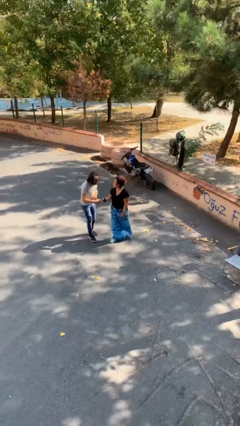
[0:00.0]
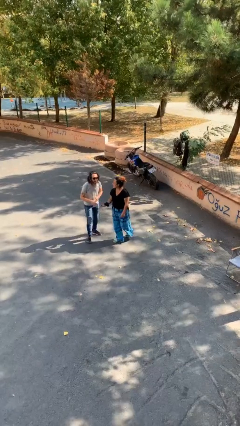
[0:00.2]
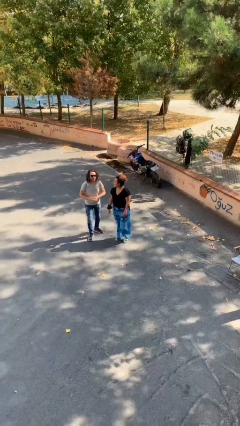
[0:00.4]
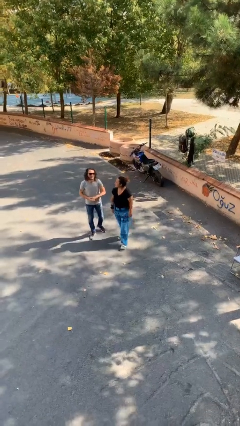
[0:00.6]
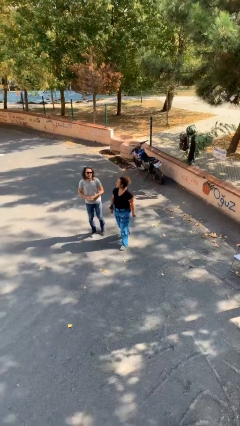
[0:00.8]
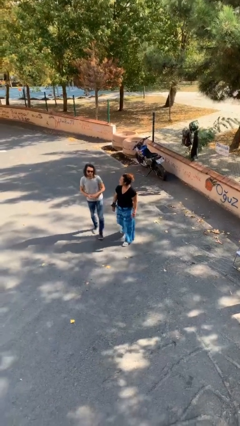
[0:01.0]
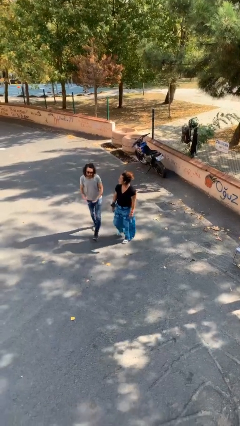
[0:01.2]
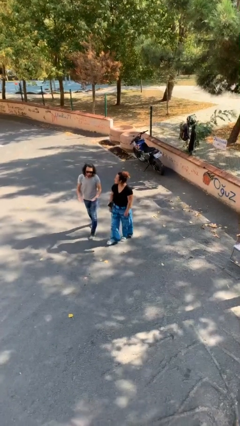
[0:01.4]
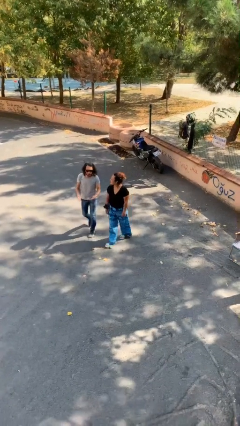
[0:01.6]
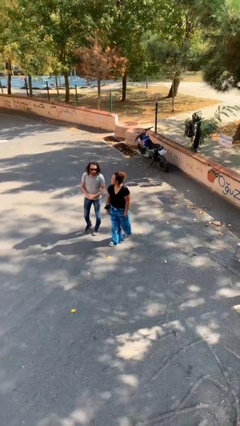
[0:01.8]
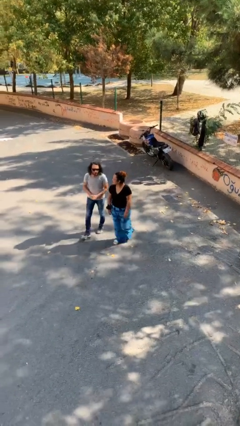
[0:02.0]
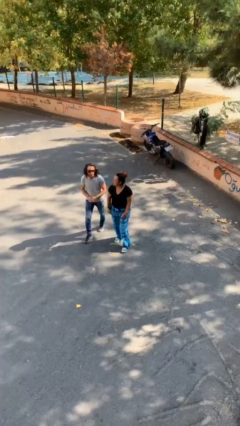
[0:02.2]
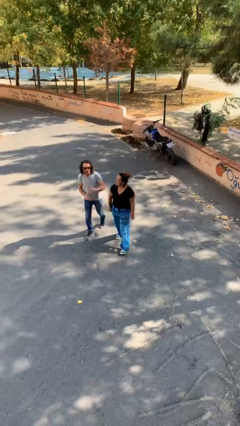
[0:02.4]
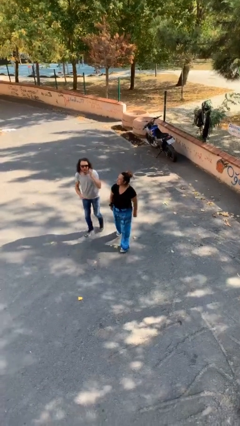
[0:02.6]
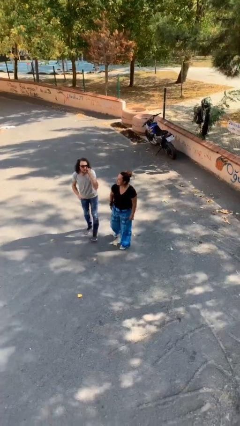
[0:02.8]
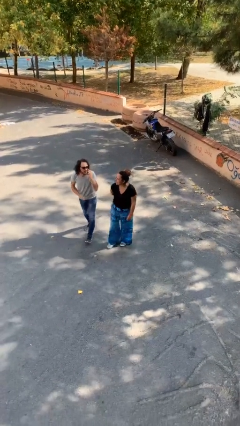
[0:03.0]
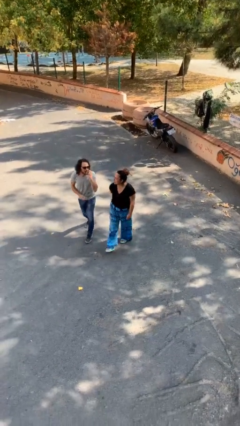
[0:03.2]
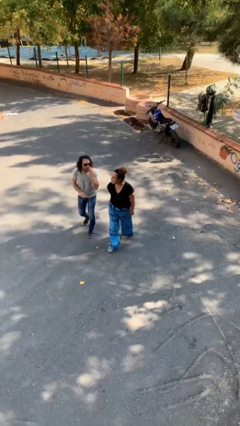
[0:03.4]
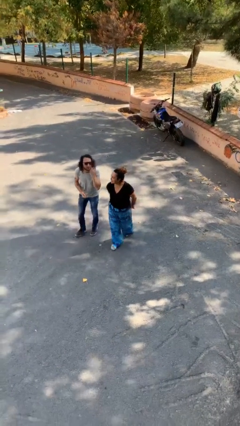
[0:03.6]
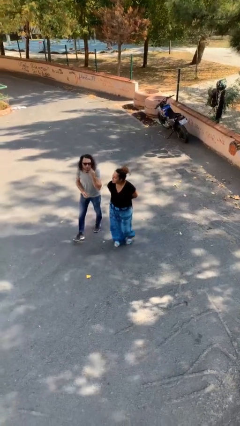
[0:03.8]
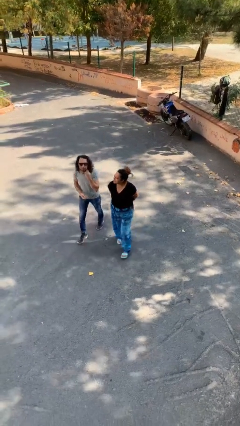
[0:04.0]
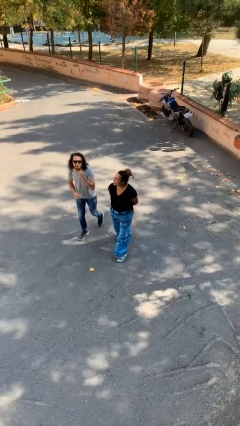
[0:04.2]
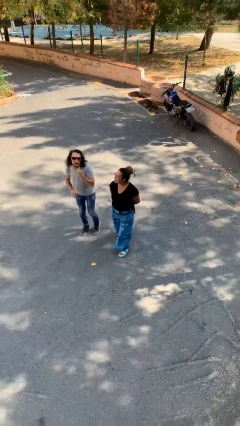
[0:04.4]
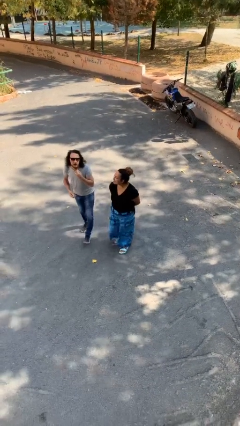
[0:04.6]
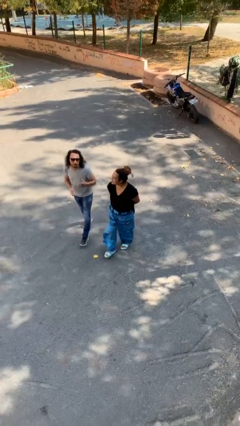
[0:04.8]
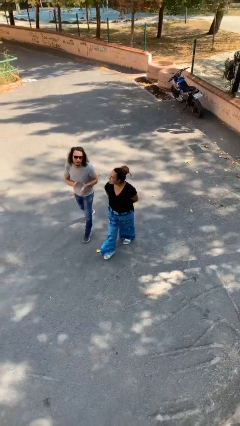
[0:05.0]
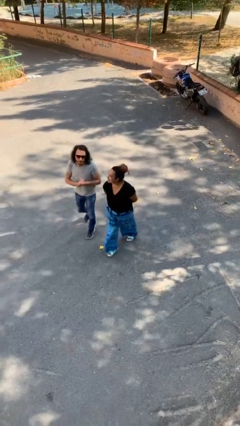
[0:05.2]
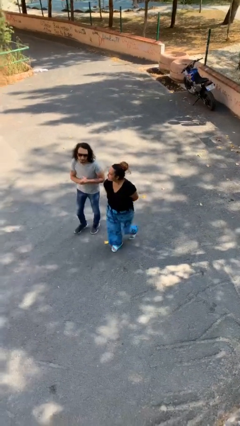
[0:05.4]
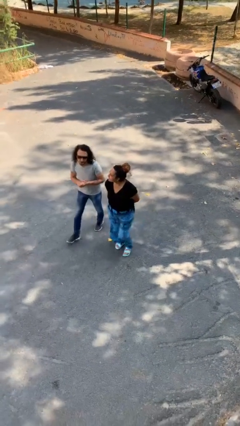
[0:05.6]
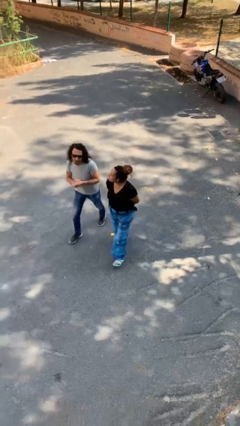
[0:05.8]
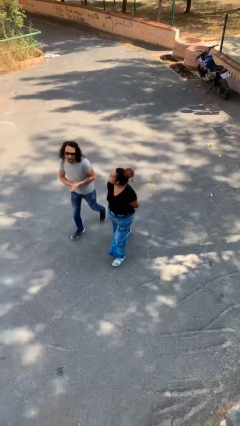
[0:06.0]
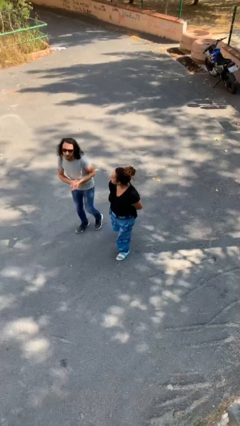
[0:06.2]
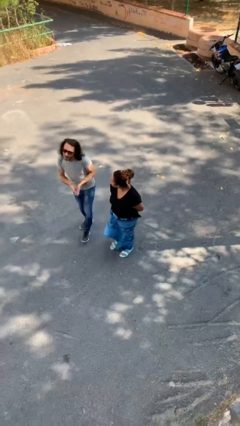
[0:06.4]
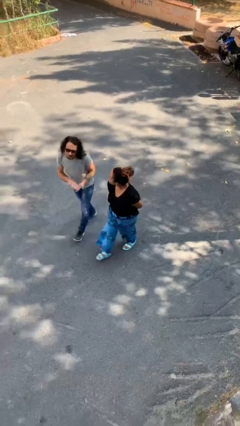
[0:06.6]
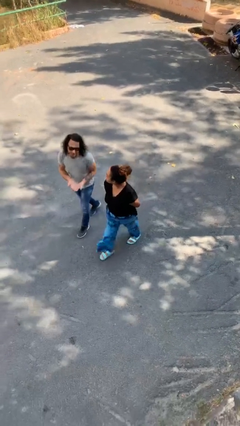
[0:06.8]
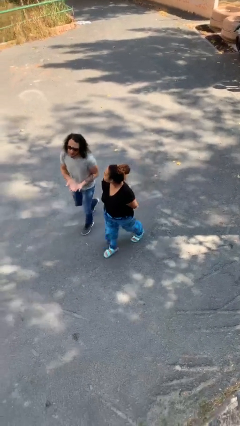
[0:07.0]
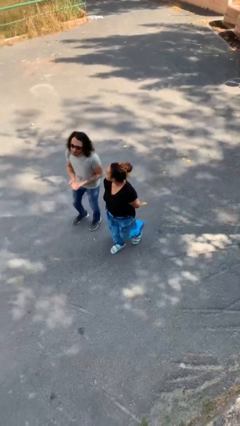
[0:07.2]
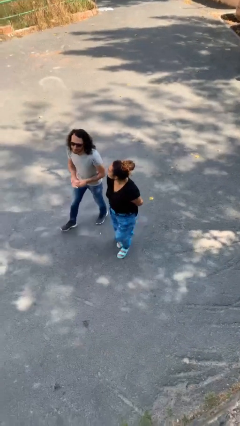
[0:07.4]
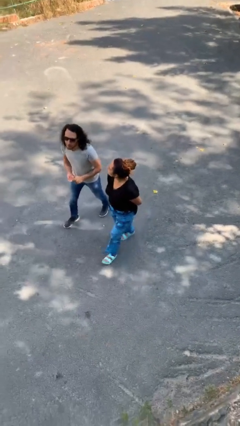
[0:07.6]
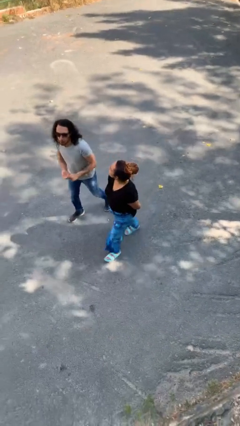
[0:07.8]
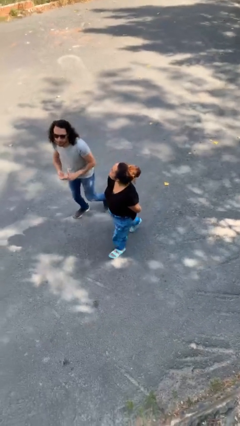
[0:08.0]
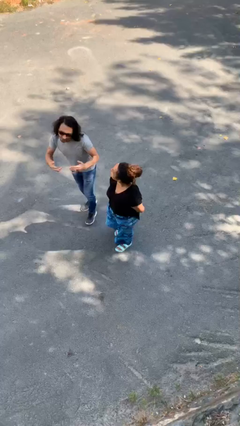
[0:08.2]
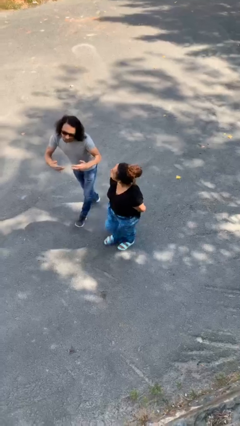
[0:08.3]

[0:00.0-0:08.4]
person talks to person

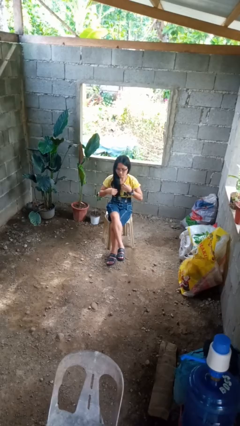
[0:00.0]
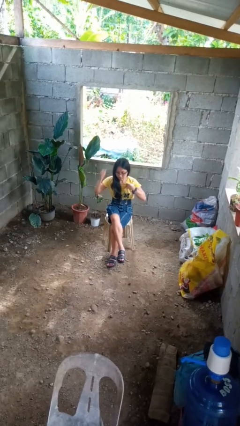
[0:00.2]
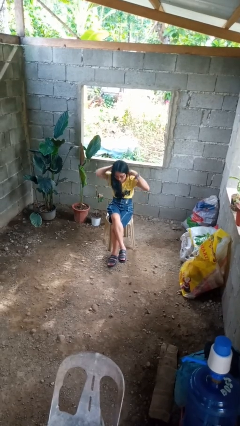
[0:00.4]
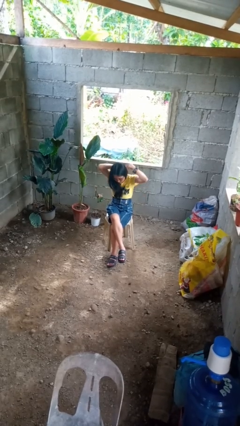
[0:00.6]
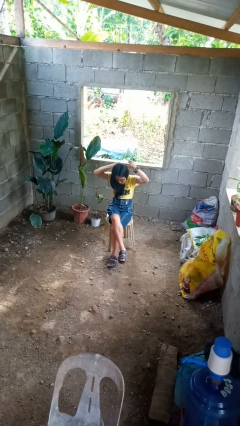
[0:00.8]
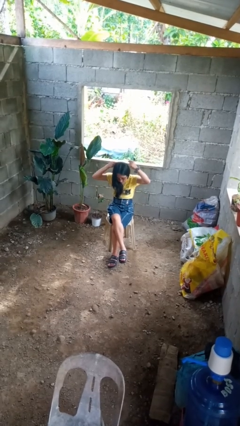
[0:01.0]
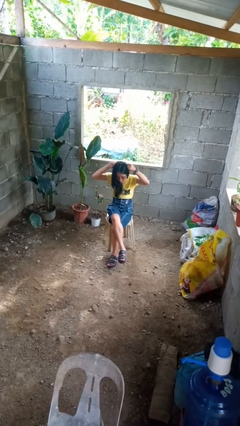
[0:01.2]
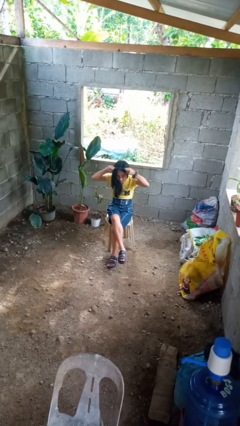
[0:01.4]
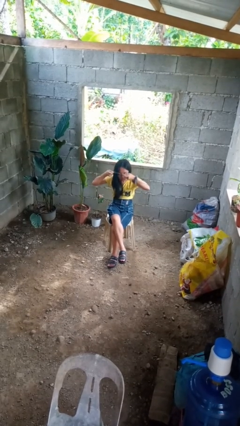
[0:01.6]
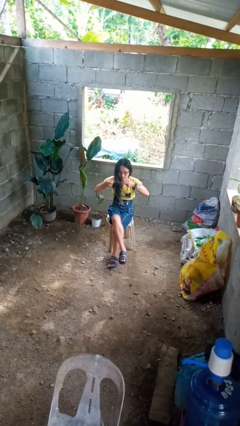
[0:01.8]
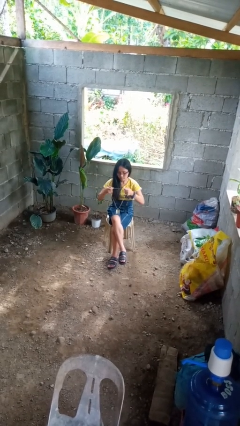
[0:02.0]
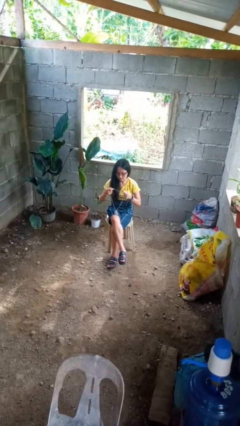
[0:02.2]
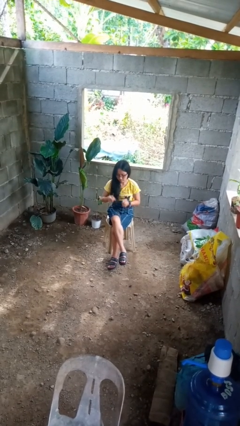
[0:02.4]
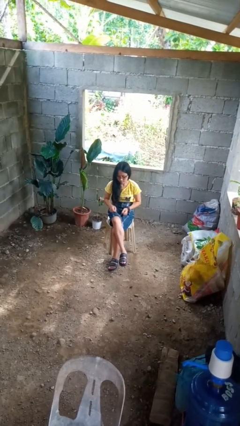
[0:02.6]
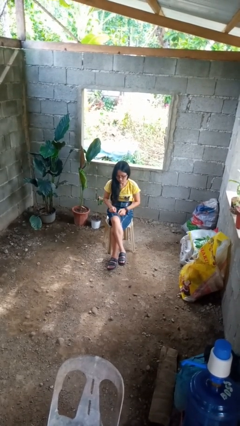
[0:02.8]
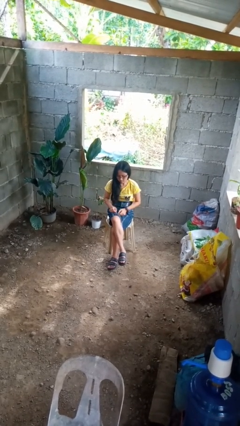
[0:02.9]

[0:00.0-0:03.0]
person takes off necklace

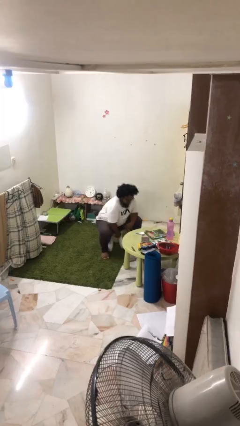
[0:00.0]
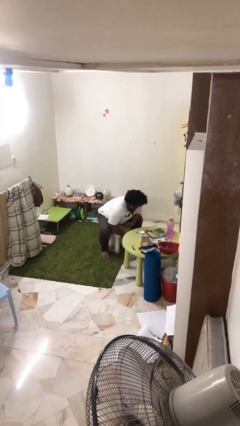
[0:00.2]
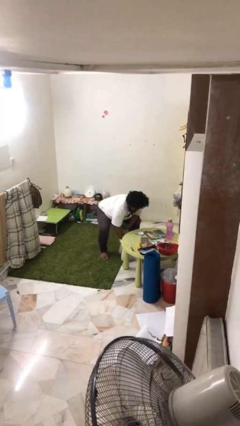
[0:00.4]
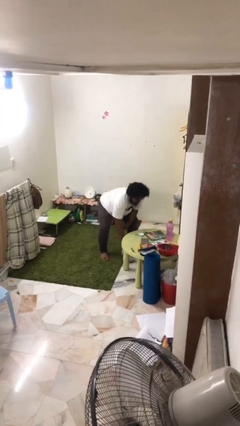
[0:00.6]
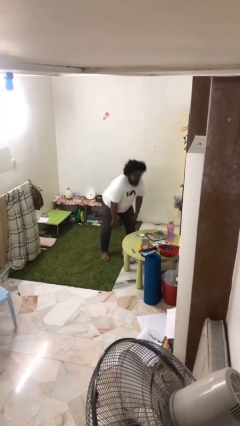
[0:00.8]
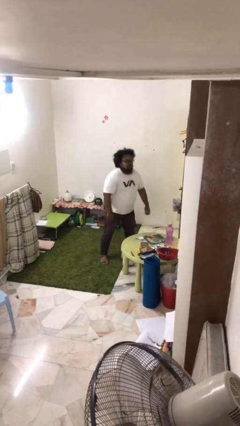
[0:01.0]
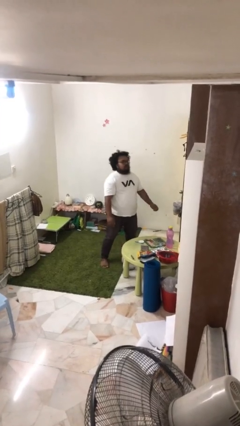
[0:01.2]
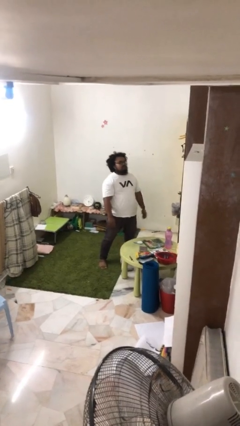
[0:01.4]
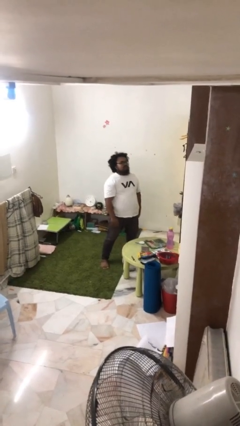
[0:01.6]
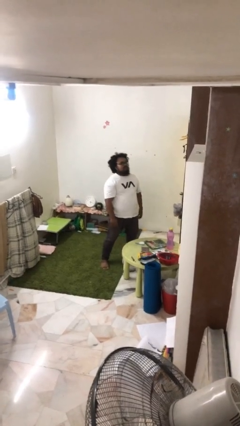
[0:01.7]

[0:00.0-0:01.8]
person stands up

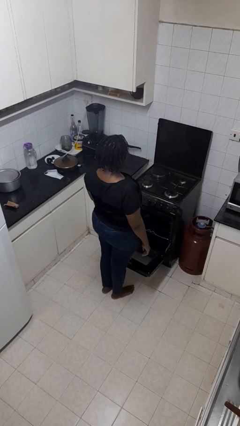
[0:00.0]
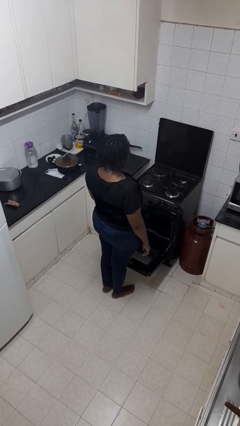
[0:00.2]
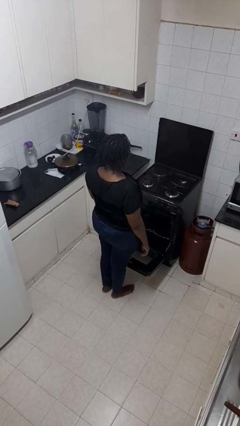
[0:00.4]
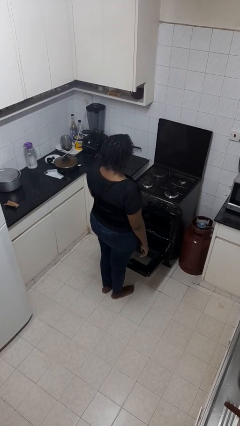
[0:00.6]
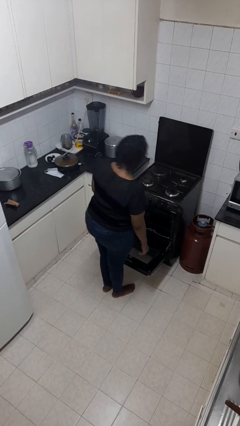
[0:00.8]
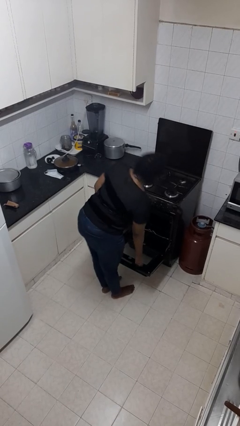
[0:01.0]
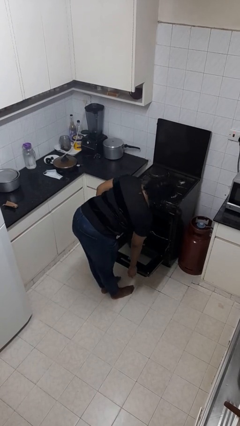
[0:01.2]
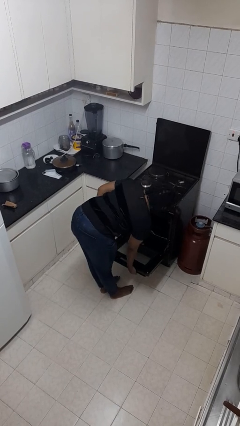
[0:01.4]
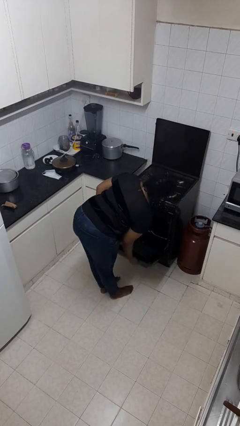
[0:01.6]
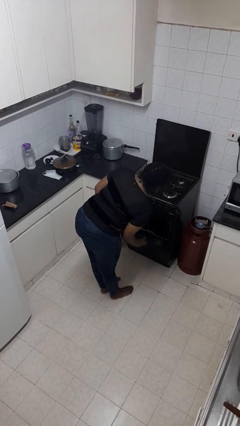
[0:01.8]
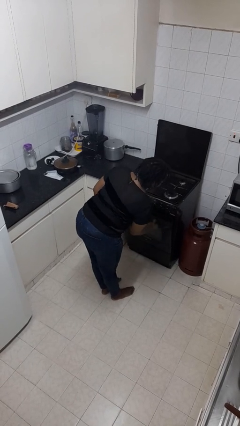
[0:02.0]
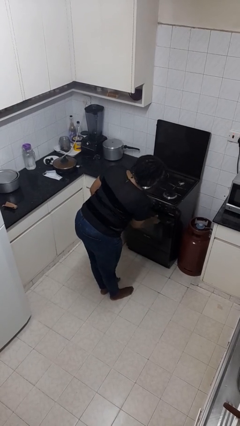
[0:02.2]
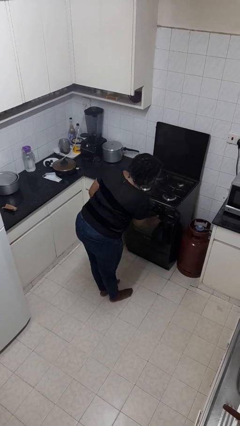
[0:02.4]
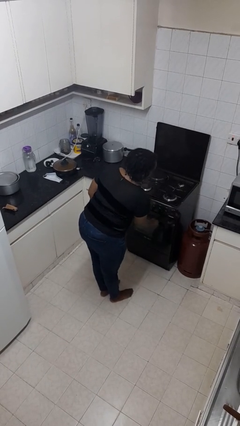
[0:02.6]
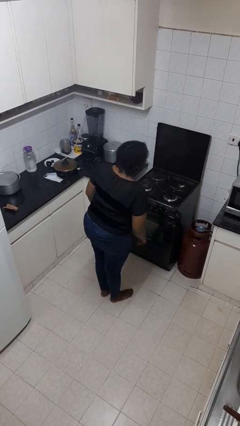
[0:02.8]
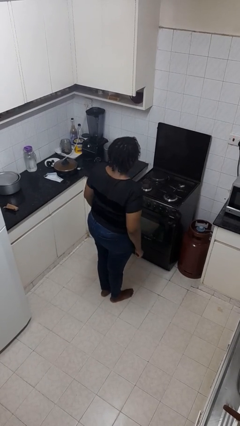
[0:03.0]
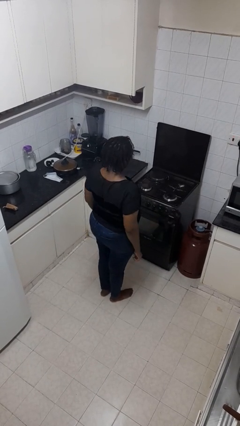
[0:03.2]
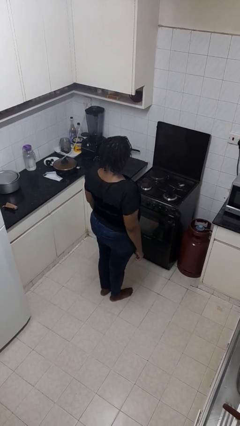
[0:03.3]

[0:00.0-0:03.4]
person closes oven door

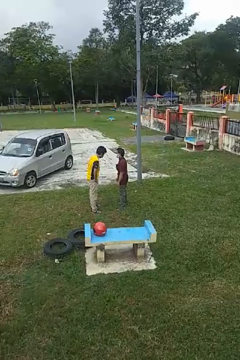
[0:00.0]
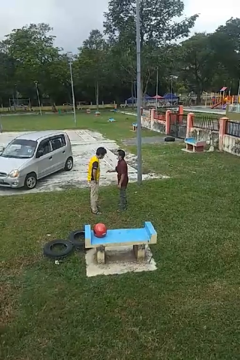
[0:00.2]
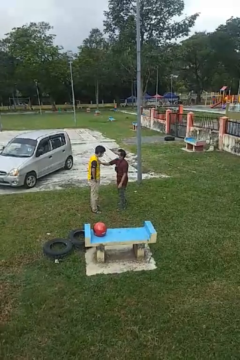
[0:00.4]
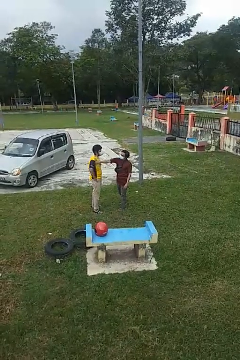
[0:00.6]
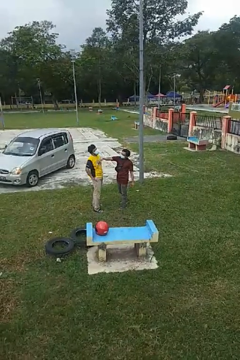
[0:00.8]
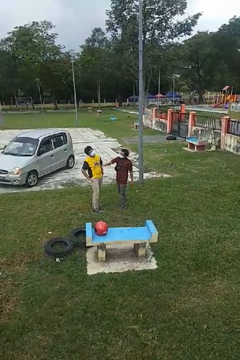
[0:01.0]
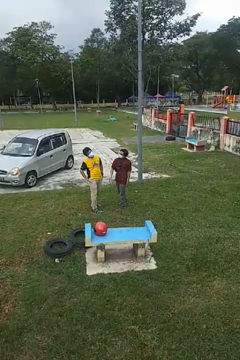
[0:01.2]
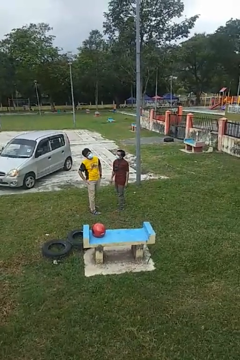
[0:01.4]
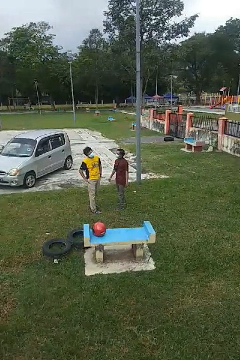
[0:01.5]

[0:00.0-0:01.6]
person shoves person
